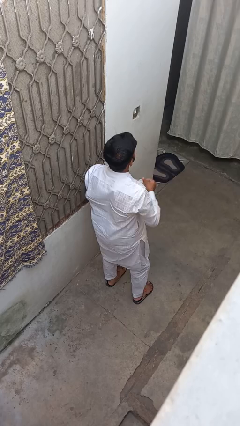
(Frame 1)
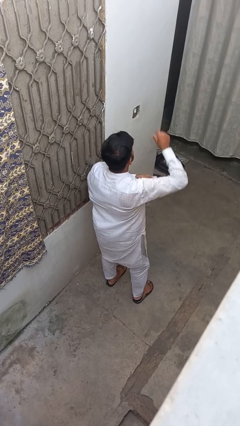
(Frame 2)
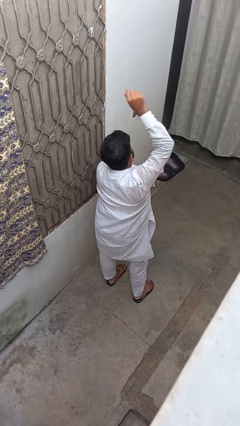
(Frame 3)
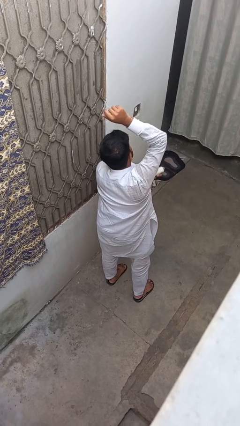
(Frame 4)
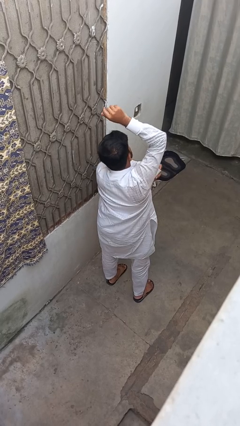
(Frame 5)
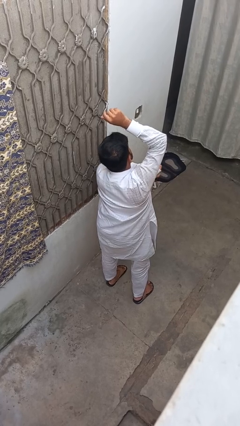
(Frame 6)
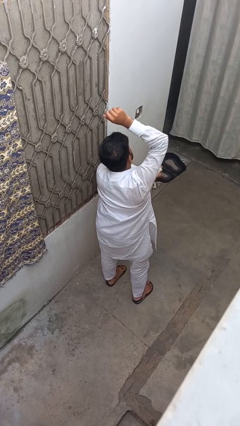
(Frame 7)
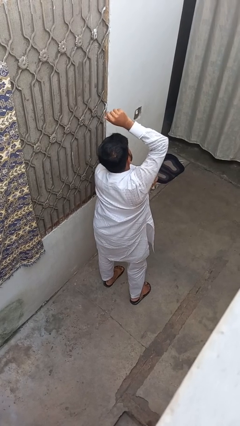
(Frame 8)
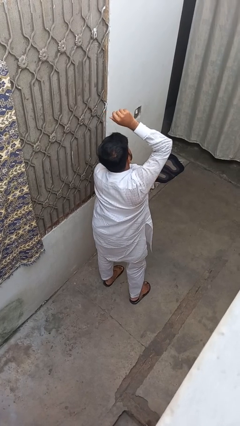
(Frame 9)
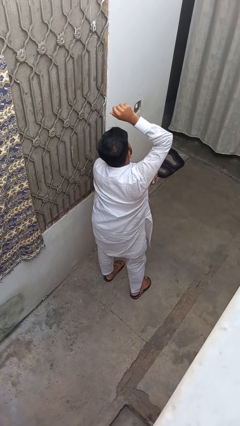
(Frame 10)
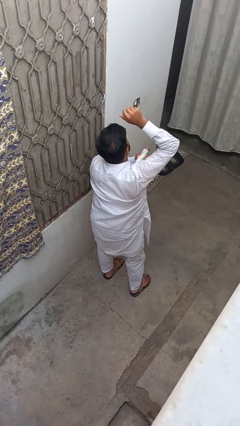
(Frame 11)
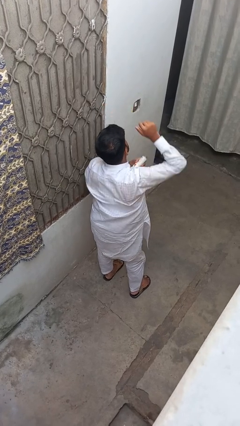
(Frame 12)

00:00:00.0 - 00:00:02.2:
person applies deodorant

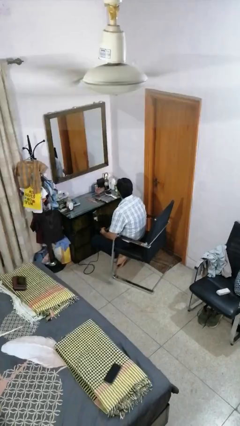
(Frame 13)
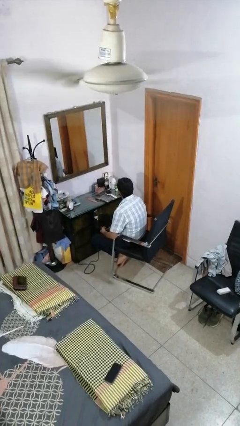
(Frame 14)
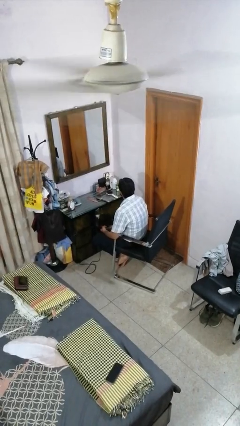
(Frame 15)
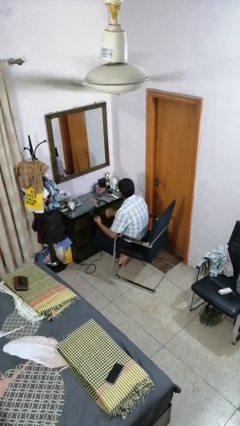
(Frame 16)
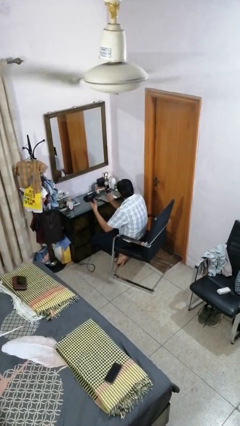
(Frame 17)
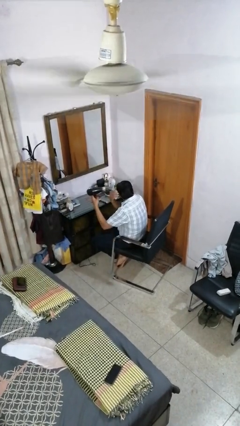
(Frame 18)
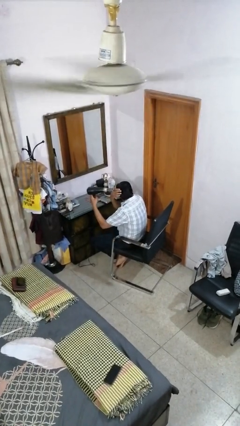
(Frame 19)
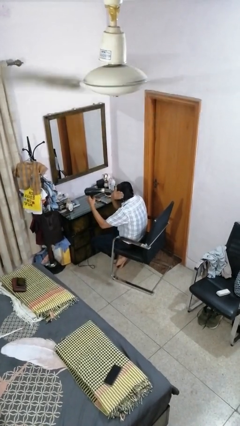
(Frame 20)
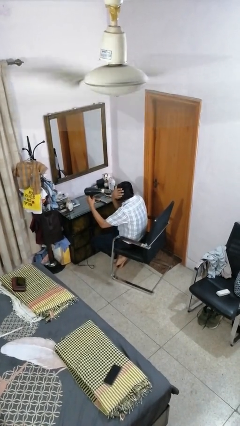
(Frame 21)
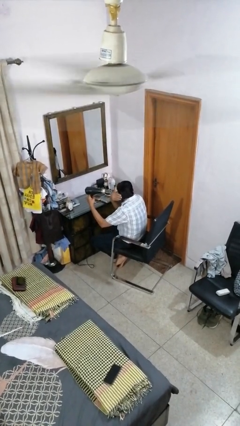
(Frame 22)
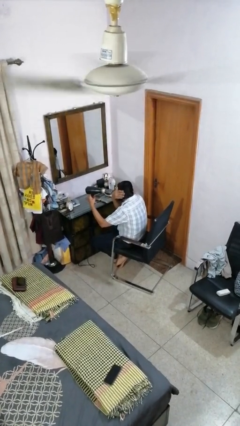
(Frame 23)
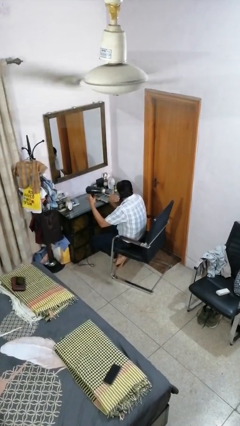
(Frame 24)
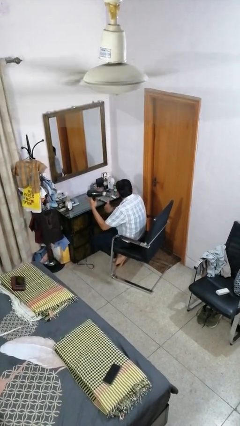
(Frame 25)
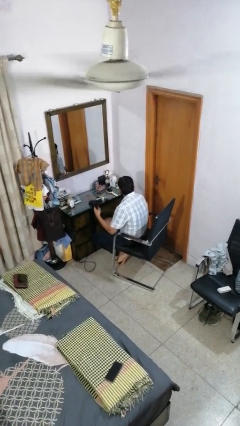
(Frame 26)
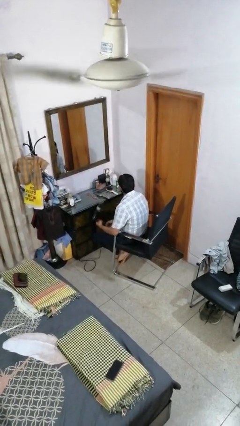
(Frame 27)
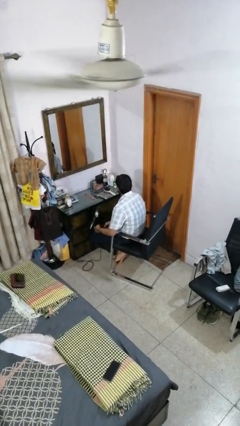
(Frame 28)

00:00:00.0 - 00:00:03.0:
person dries hair with hairdryer

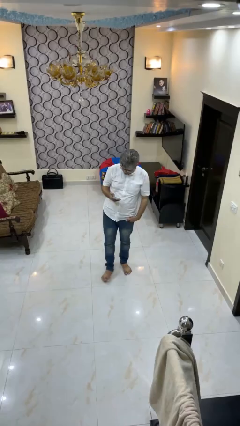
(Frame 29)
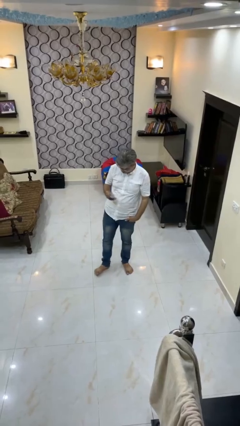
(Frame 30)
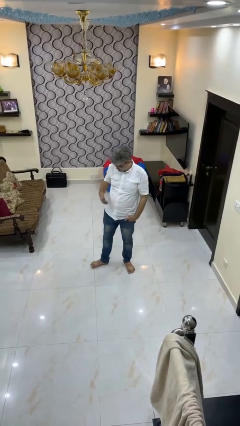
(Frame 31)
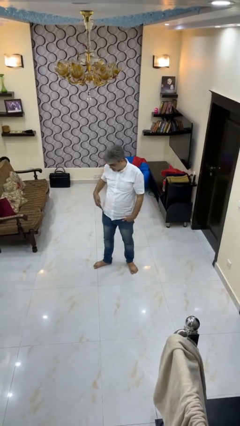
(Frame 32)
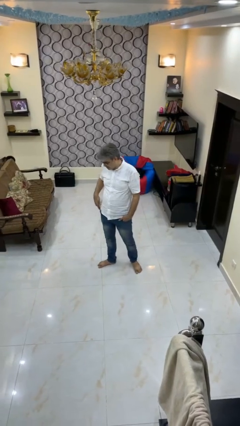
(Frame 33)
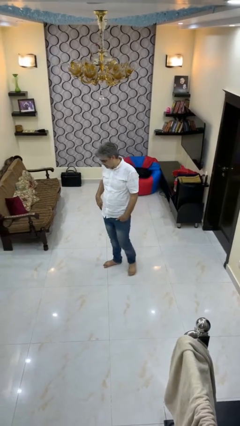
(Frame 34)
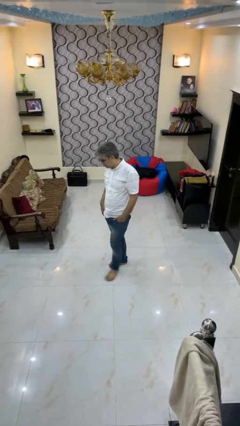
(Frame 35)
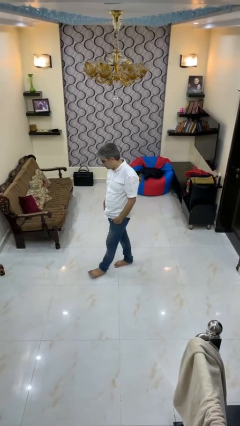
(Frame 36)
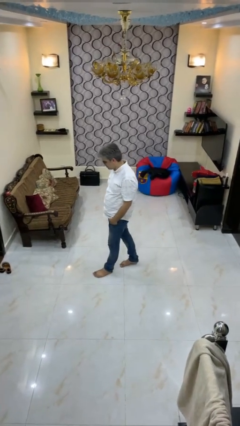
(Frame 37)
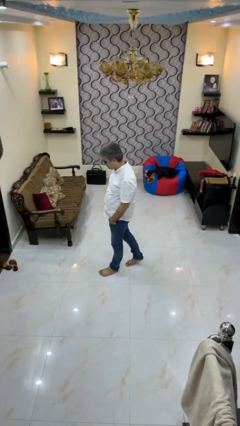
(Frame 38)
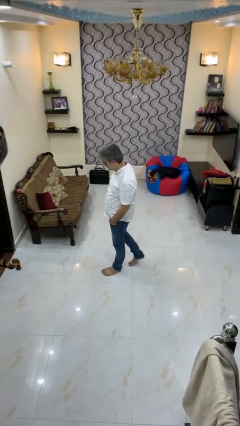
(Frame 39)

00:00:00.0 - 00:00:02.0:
person puts phone into pocket

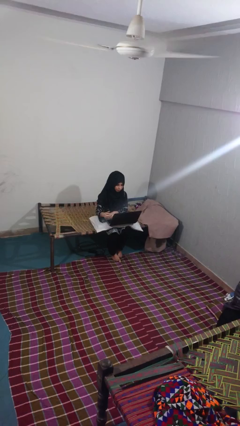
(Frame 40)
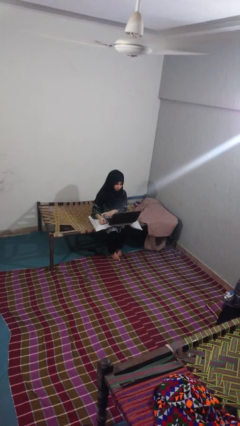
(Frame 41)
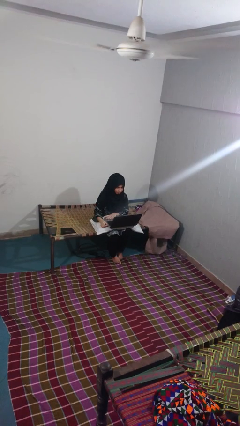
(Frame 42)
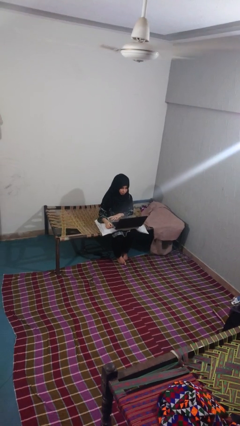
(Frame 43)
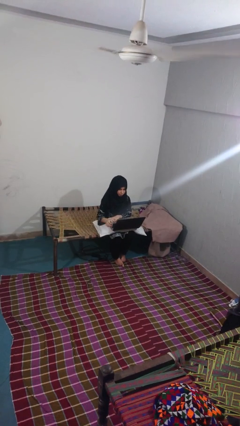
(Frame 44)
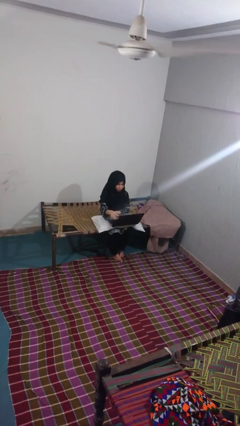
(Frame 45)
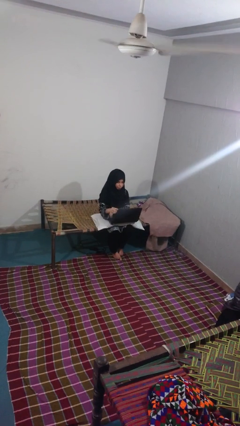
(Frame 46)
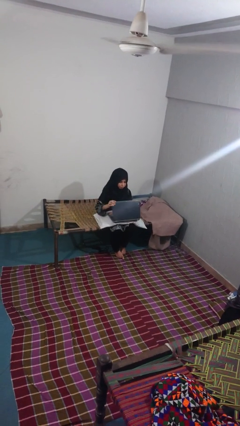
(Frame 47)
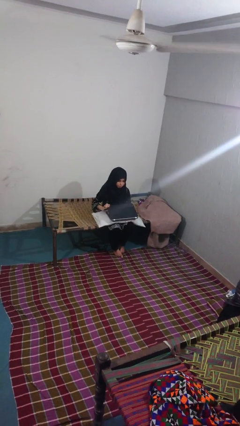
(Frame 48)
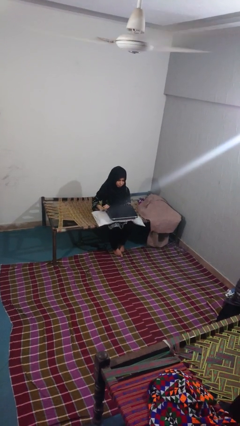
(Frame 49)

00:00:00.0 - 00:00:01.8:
person closes laptop

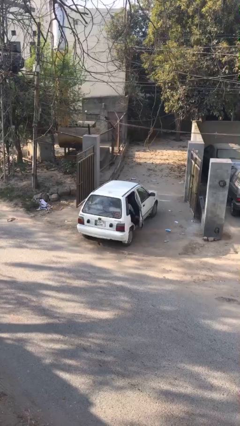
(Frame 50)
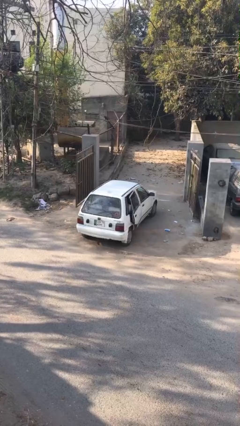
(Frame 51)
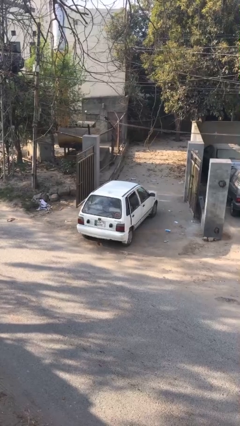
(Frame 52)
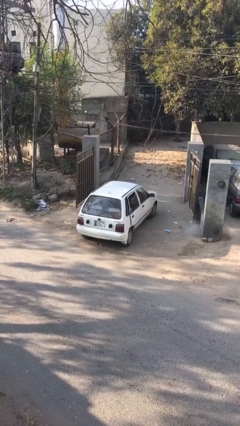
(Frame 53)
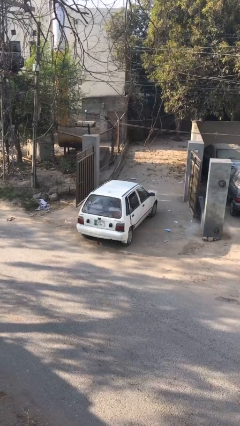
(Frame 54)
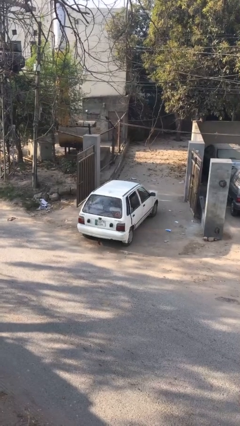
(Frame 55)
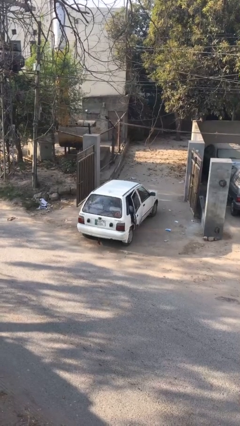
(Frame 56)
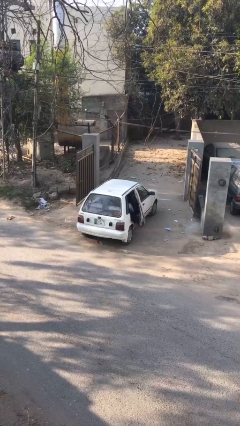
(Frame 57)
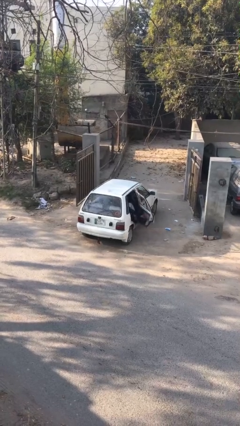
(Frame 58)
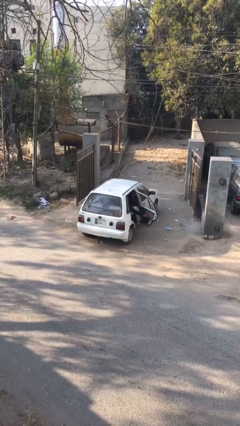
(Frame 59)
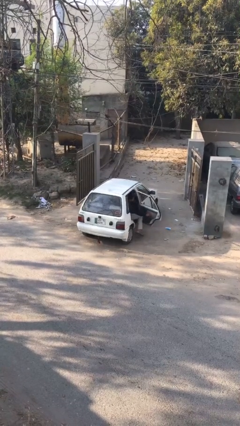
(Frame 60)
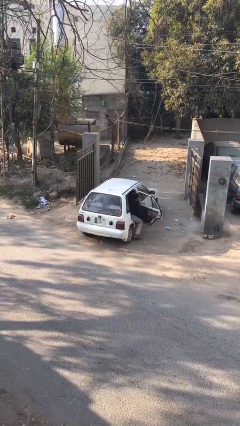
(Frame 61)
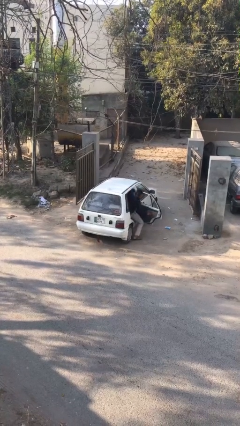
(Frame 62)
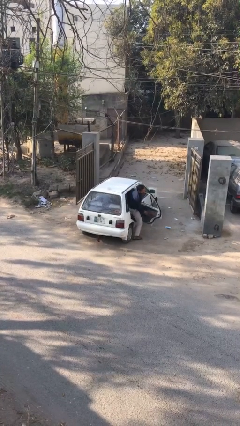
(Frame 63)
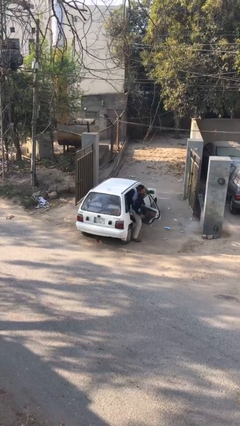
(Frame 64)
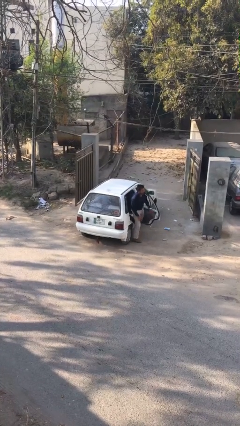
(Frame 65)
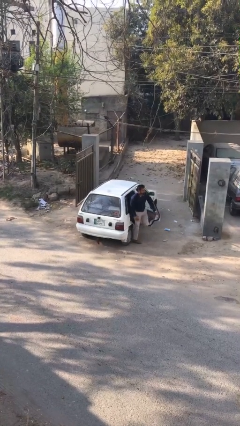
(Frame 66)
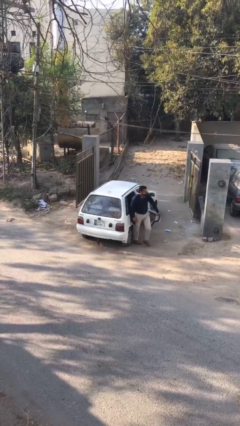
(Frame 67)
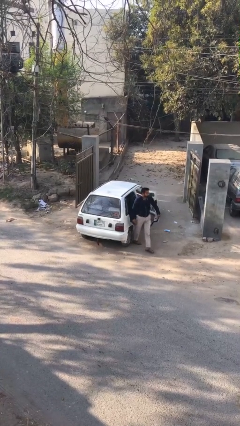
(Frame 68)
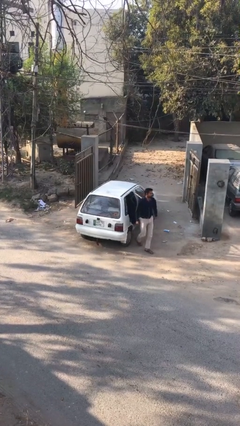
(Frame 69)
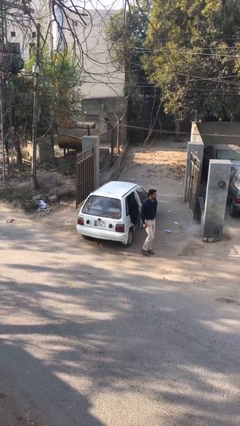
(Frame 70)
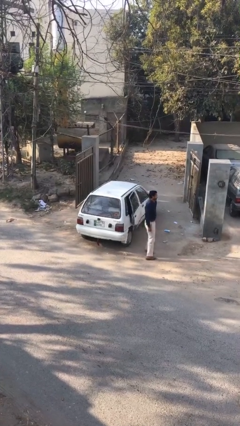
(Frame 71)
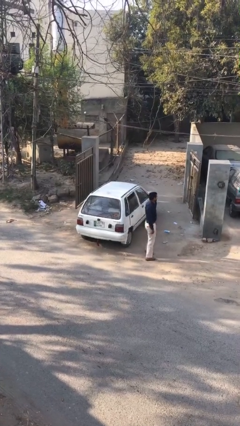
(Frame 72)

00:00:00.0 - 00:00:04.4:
car drops off person

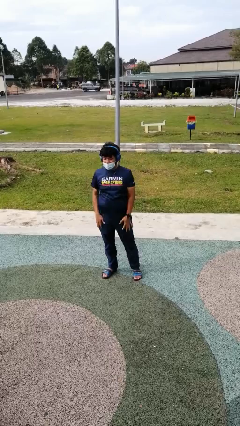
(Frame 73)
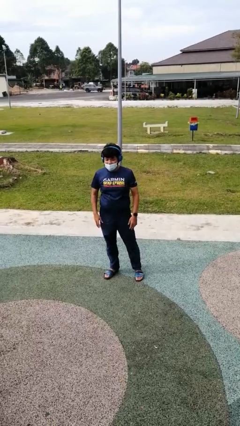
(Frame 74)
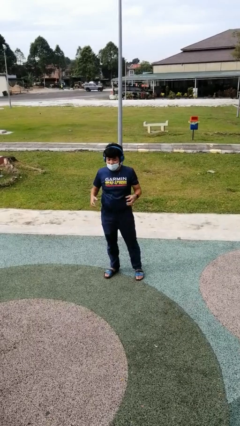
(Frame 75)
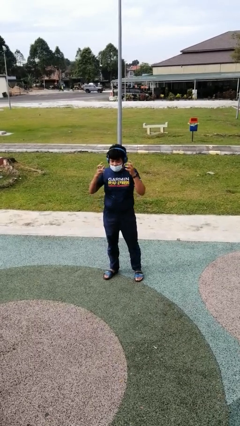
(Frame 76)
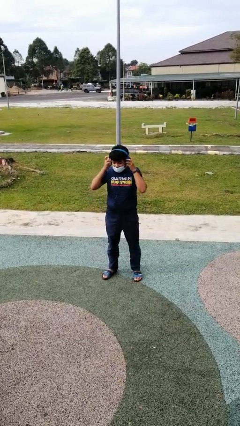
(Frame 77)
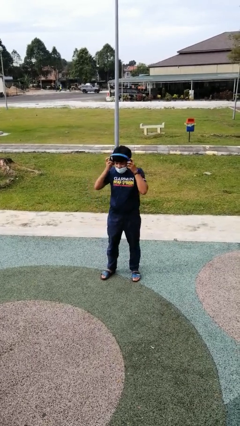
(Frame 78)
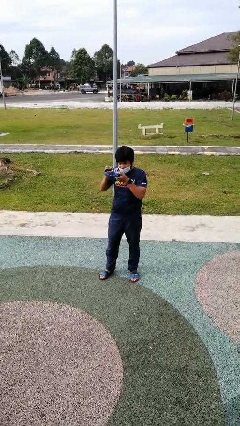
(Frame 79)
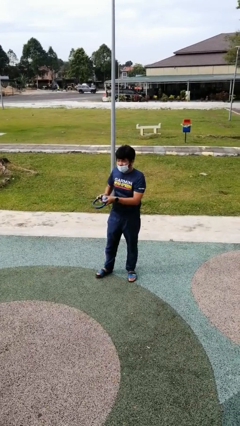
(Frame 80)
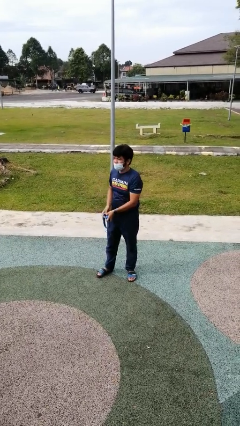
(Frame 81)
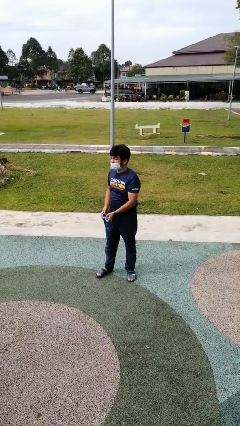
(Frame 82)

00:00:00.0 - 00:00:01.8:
person takes off headphones

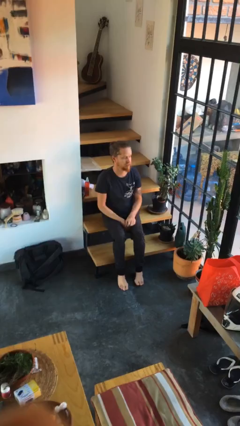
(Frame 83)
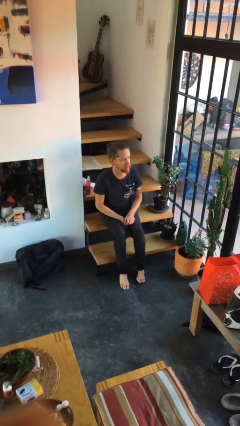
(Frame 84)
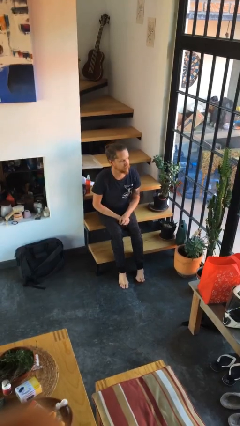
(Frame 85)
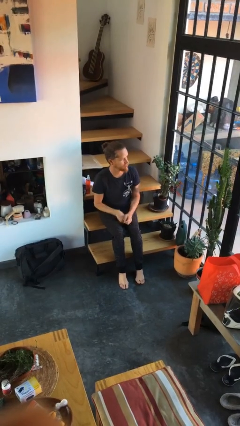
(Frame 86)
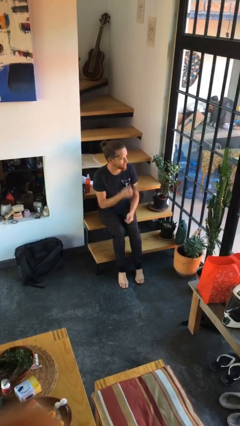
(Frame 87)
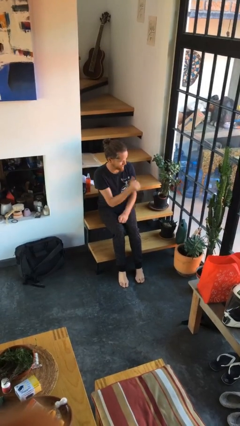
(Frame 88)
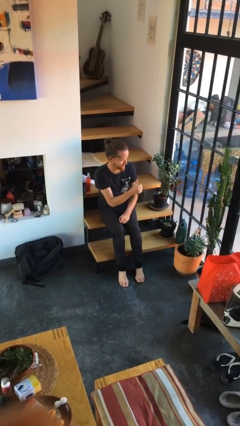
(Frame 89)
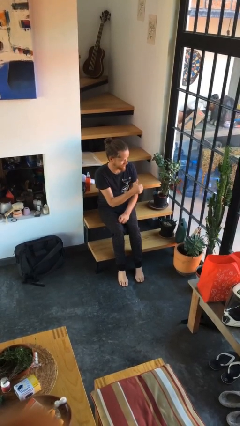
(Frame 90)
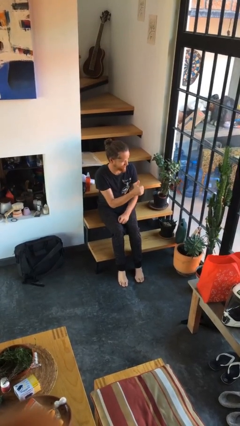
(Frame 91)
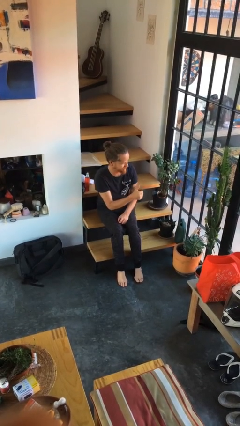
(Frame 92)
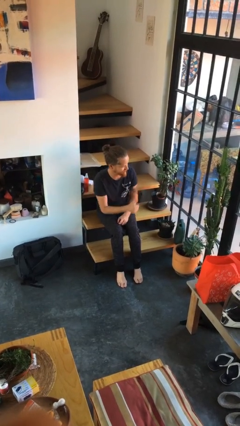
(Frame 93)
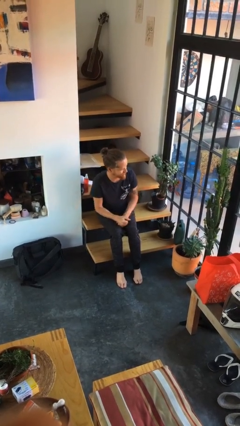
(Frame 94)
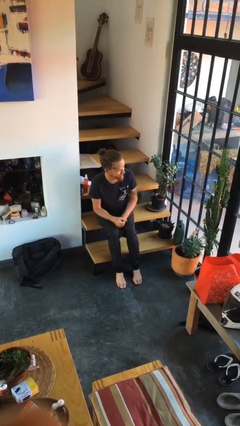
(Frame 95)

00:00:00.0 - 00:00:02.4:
person gestures thumbs up
